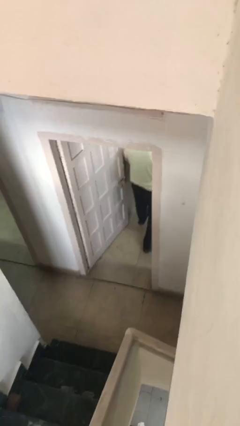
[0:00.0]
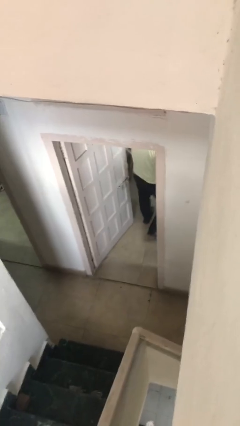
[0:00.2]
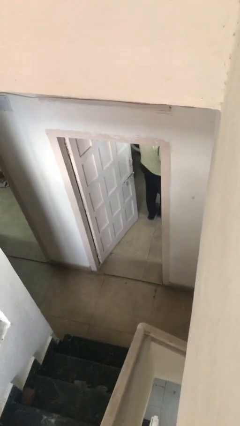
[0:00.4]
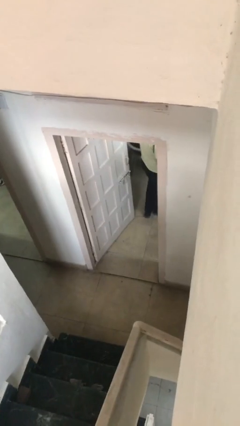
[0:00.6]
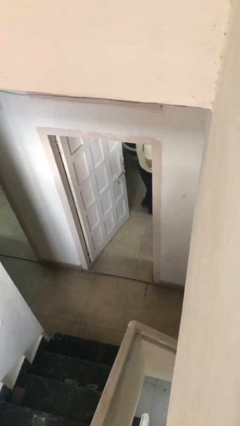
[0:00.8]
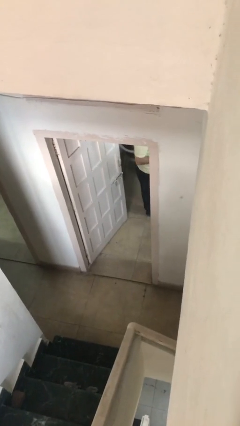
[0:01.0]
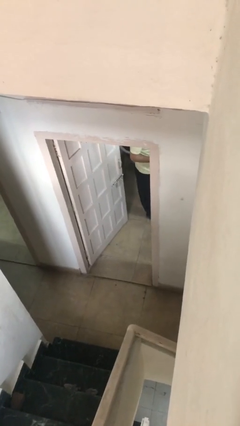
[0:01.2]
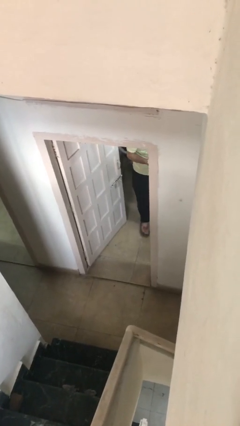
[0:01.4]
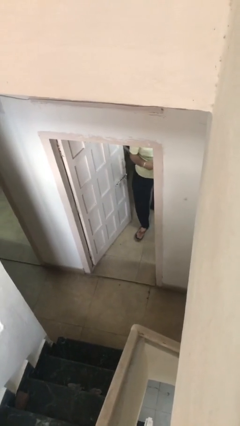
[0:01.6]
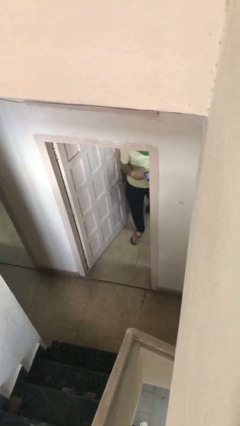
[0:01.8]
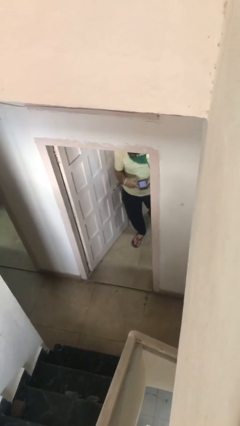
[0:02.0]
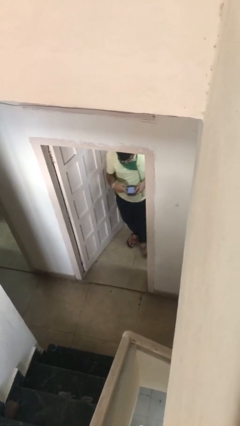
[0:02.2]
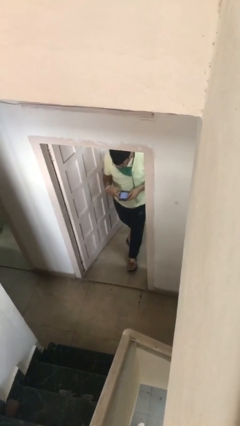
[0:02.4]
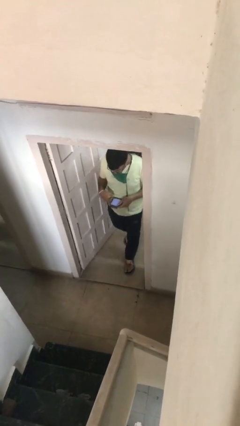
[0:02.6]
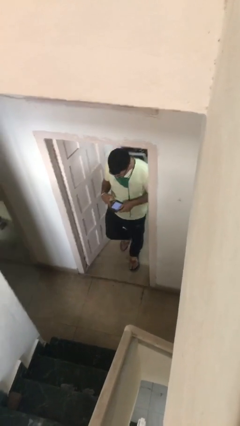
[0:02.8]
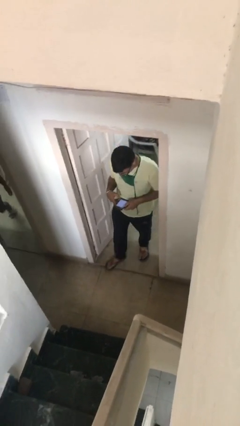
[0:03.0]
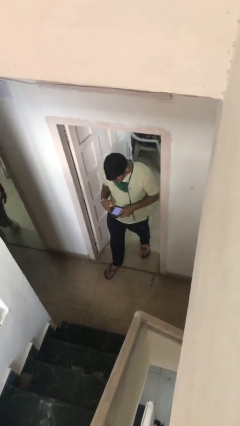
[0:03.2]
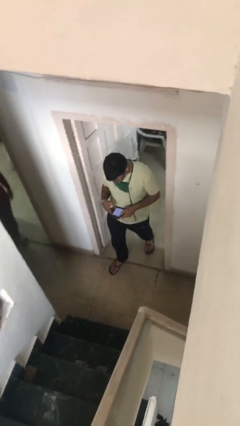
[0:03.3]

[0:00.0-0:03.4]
person enters scene through structure

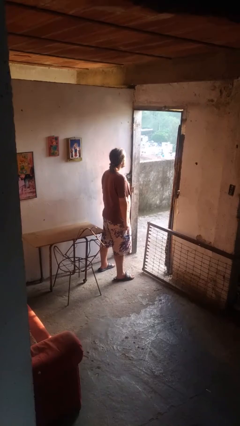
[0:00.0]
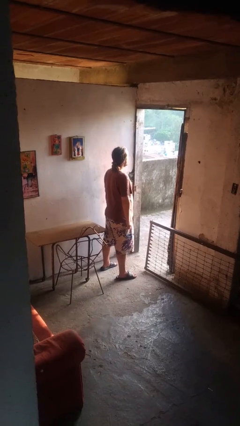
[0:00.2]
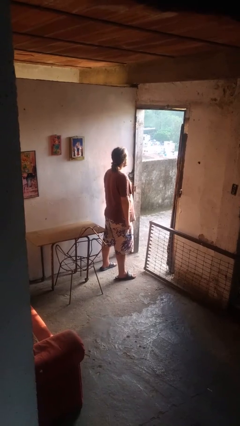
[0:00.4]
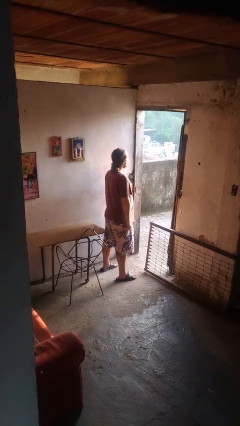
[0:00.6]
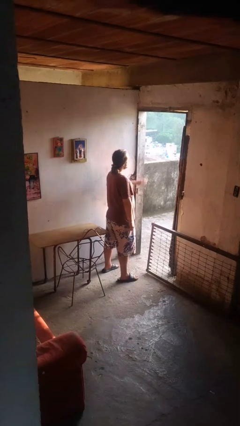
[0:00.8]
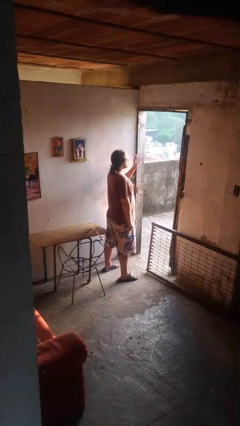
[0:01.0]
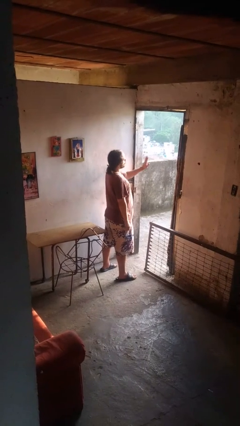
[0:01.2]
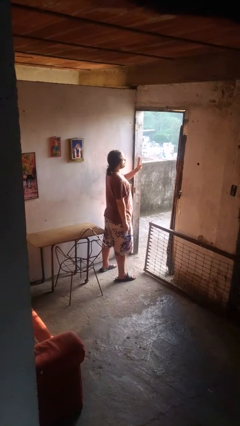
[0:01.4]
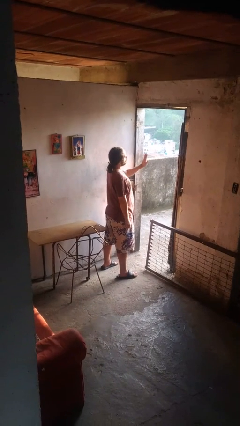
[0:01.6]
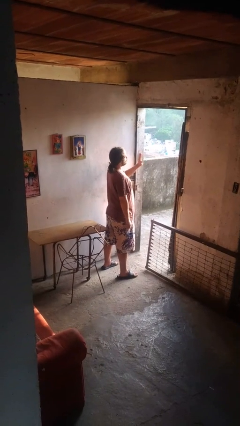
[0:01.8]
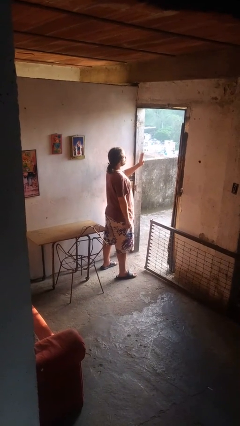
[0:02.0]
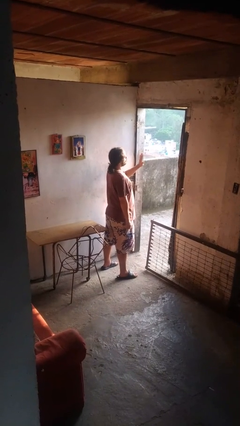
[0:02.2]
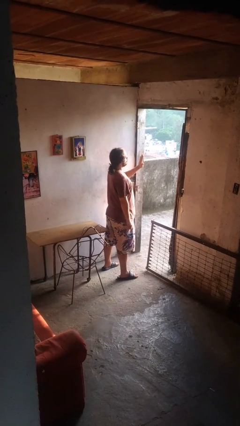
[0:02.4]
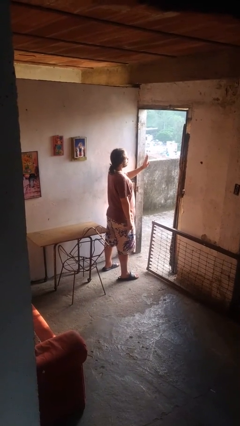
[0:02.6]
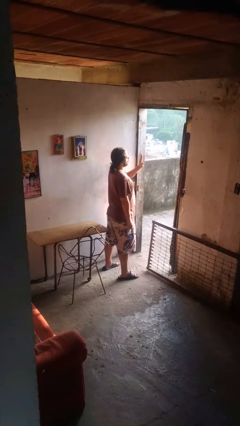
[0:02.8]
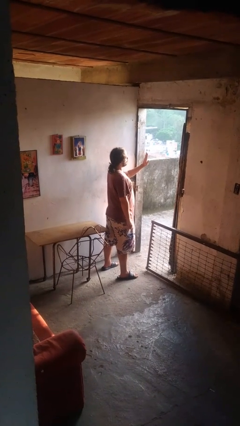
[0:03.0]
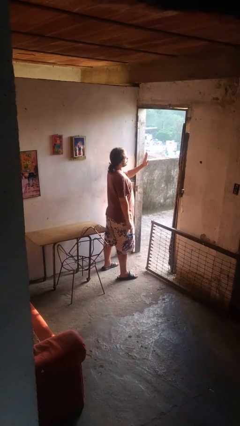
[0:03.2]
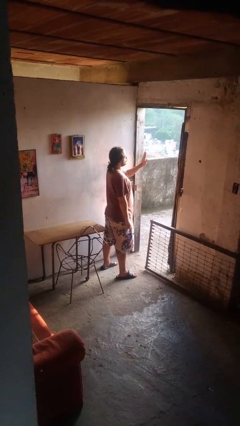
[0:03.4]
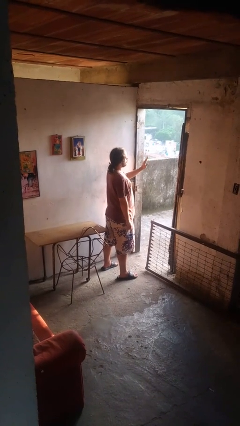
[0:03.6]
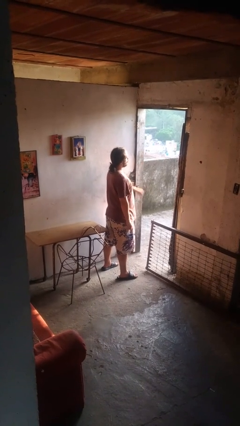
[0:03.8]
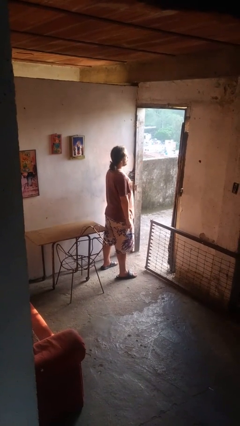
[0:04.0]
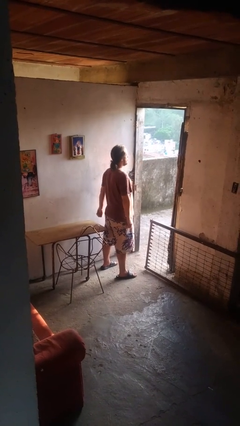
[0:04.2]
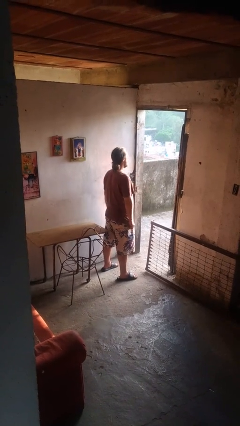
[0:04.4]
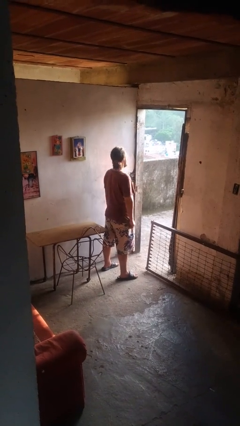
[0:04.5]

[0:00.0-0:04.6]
person gestures stop

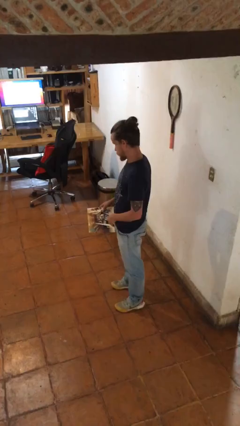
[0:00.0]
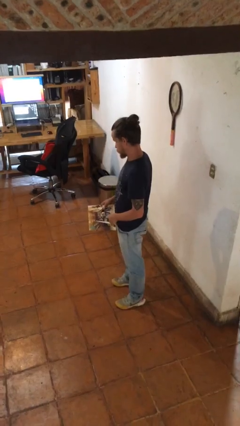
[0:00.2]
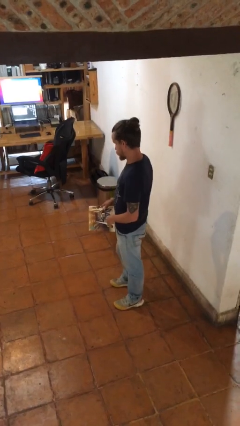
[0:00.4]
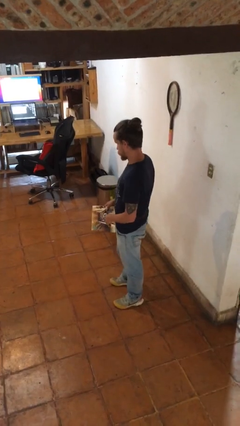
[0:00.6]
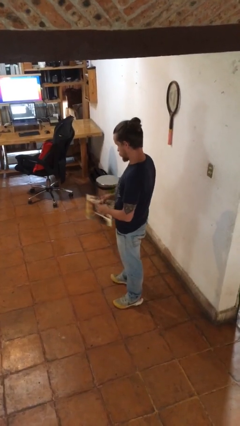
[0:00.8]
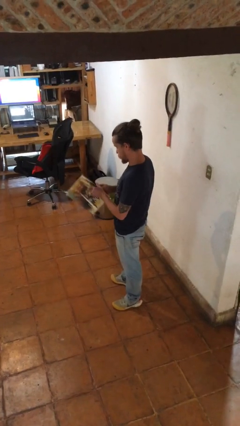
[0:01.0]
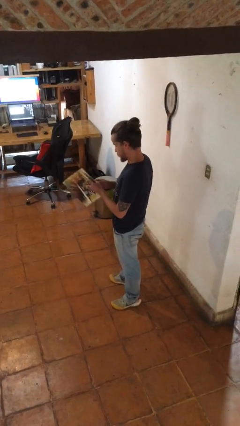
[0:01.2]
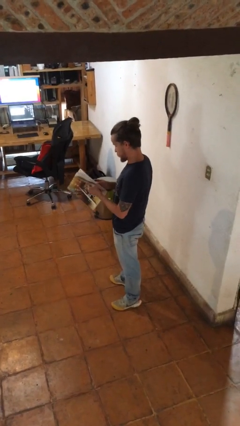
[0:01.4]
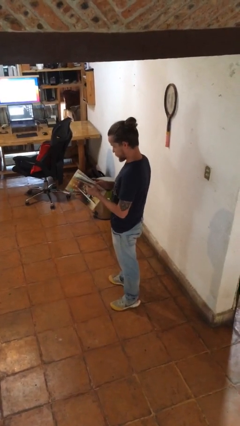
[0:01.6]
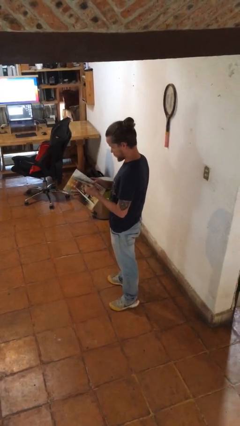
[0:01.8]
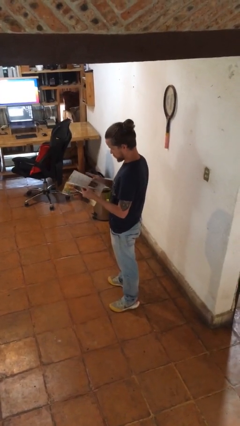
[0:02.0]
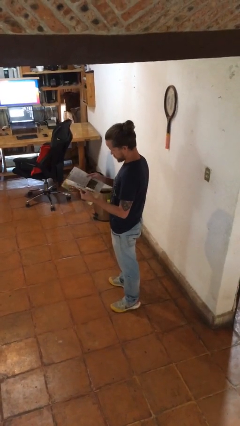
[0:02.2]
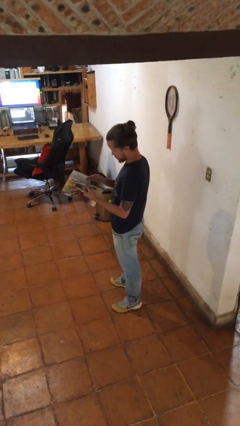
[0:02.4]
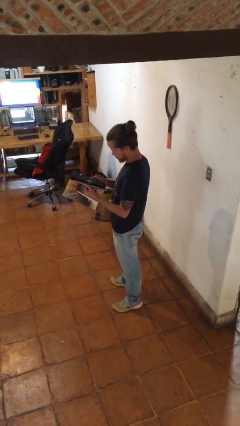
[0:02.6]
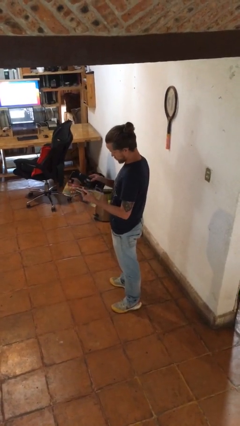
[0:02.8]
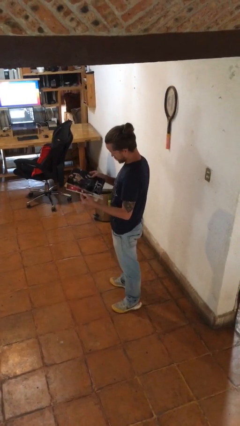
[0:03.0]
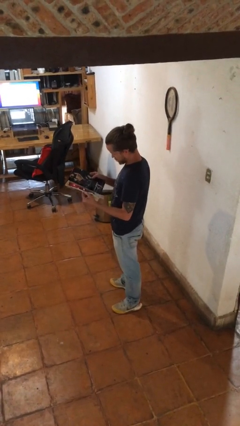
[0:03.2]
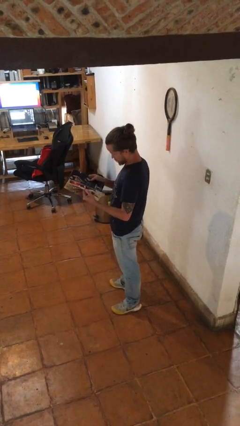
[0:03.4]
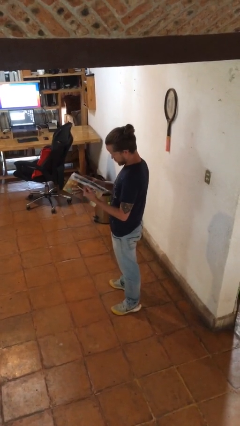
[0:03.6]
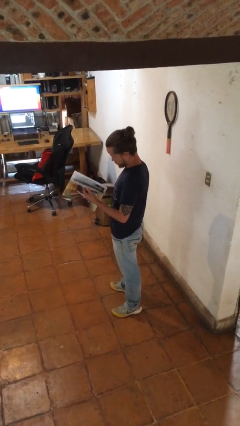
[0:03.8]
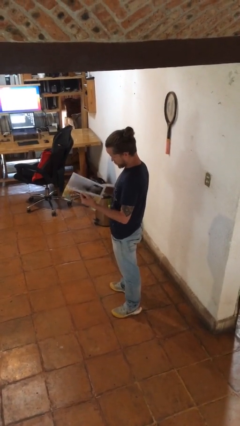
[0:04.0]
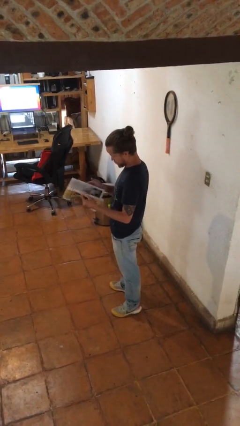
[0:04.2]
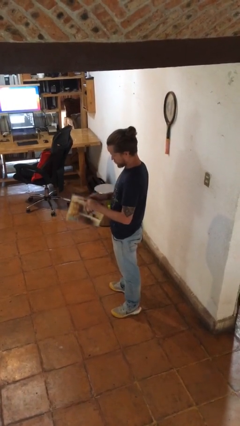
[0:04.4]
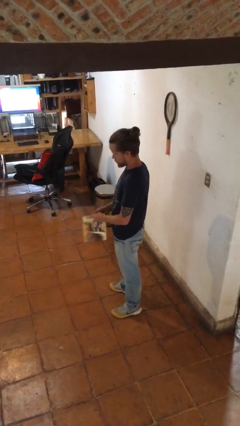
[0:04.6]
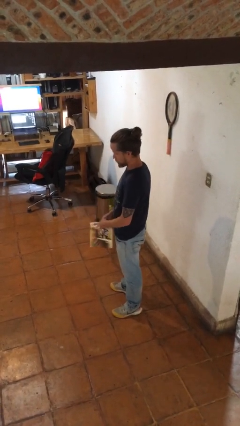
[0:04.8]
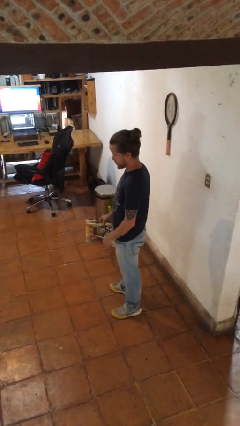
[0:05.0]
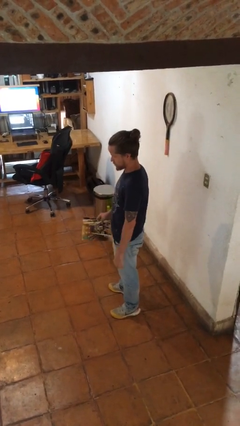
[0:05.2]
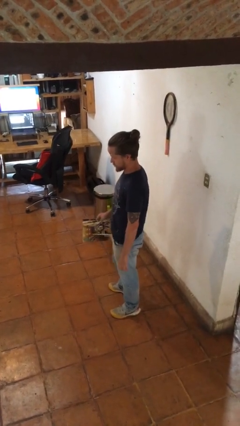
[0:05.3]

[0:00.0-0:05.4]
person reads magazine

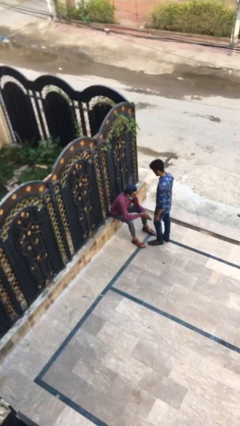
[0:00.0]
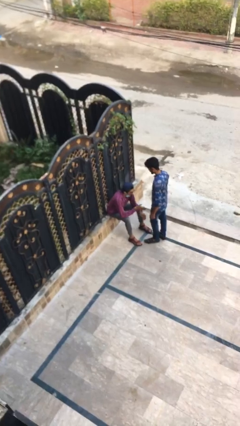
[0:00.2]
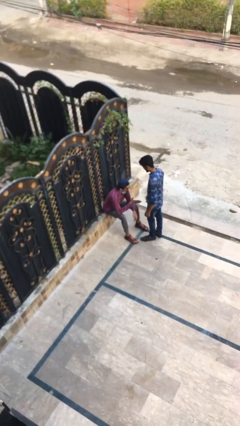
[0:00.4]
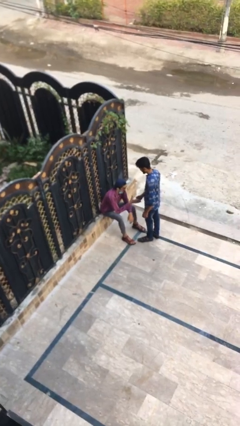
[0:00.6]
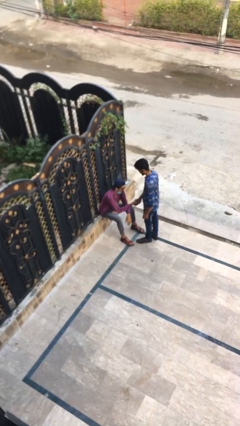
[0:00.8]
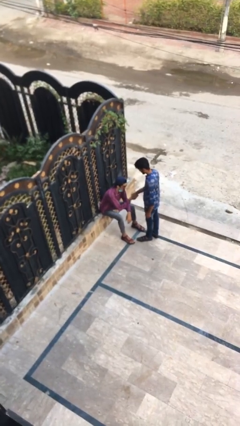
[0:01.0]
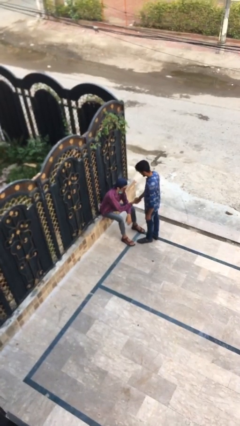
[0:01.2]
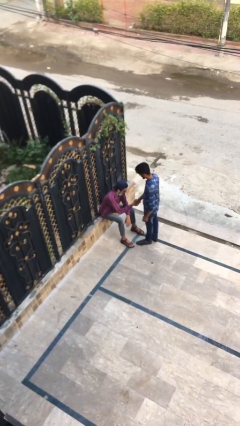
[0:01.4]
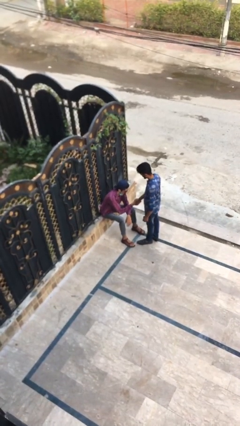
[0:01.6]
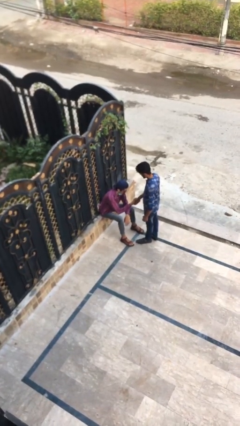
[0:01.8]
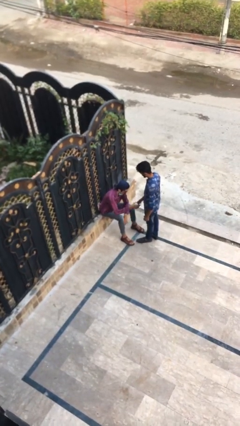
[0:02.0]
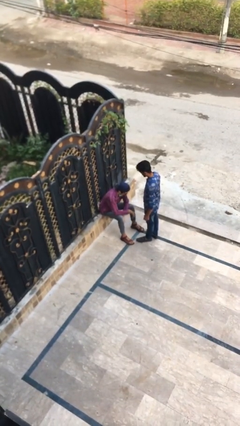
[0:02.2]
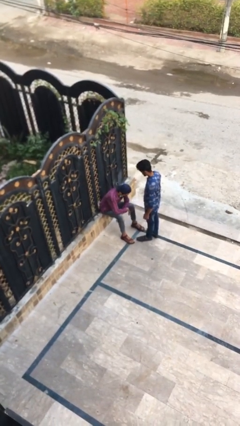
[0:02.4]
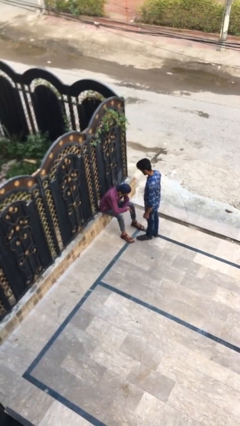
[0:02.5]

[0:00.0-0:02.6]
person shakes hand

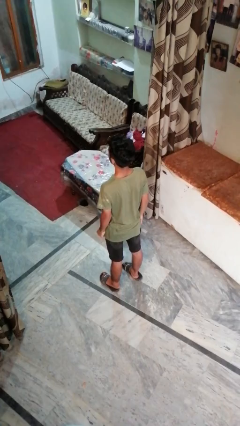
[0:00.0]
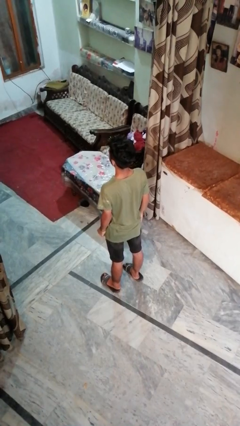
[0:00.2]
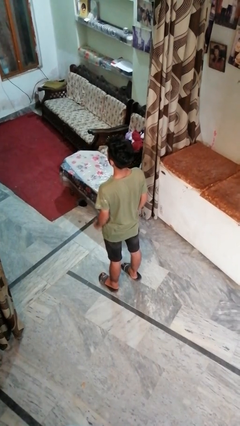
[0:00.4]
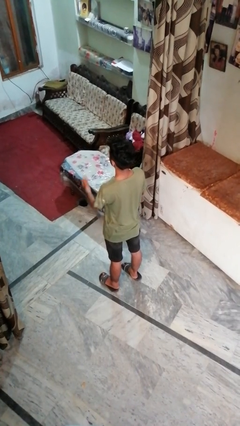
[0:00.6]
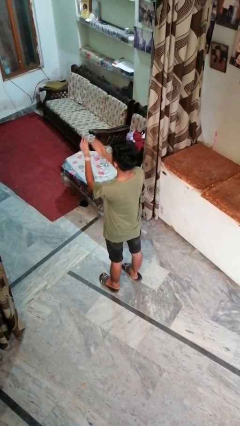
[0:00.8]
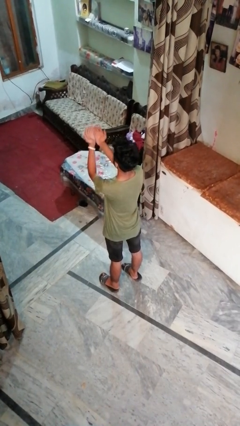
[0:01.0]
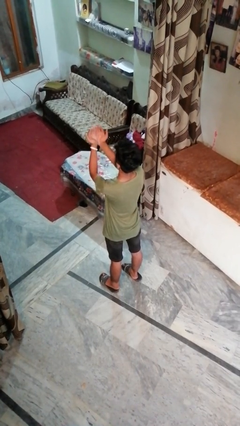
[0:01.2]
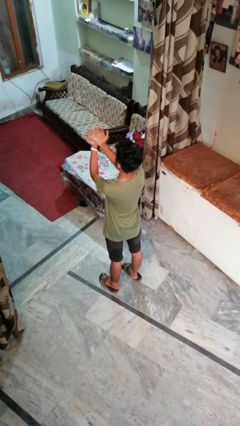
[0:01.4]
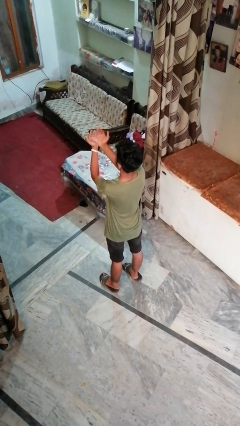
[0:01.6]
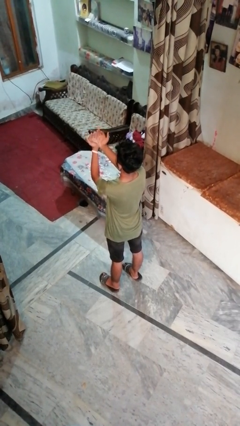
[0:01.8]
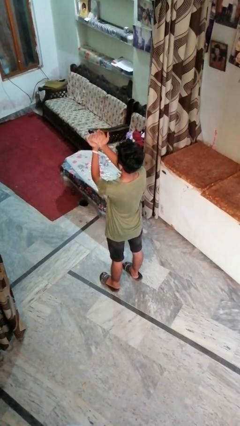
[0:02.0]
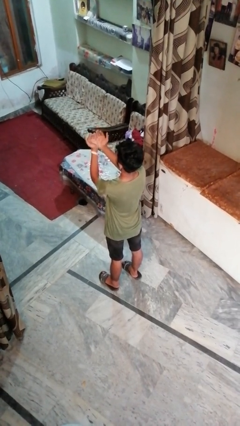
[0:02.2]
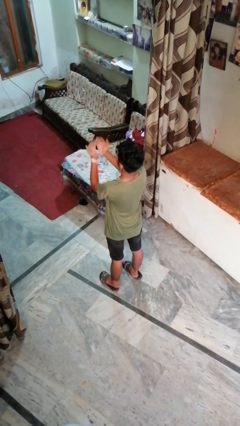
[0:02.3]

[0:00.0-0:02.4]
person prays
